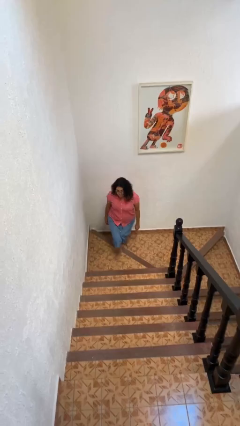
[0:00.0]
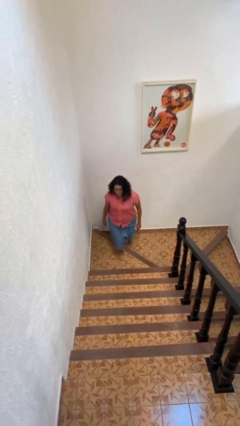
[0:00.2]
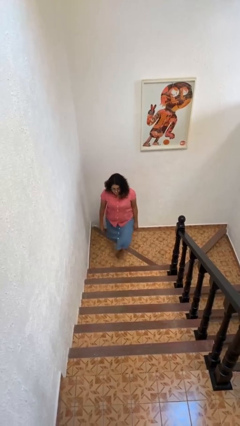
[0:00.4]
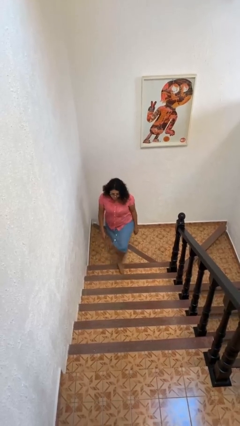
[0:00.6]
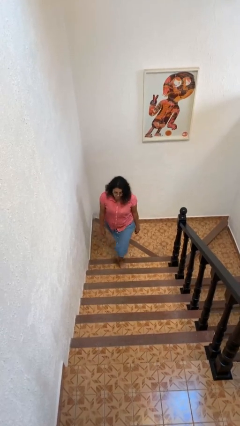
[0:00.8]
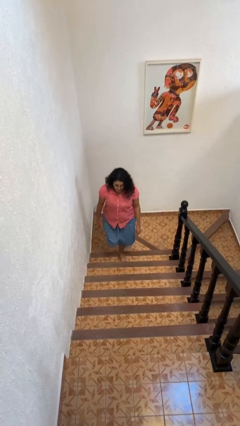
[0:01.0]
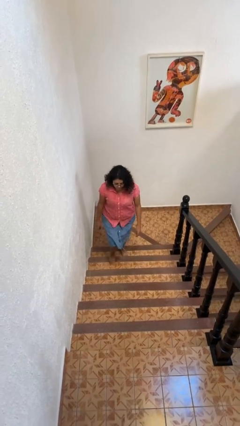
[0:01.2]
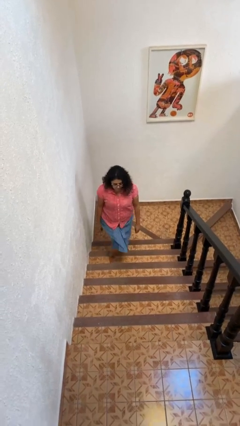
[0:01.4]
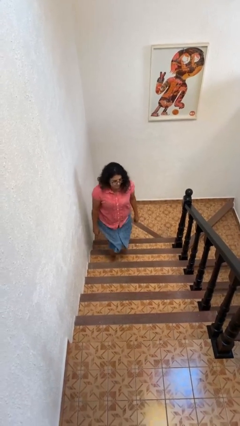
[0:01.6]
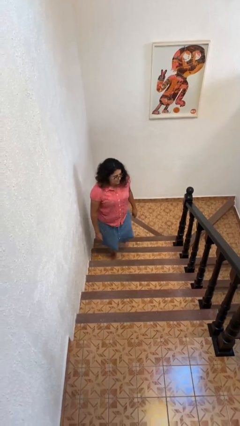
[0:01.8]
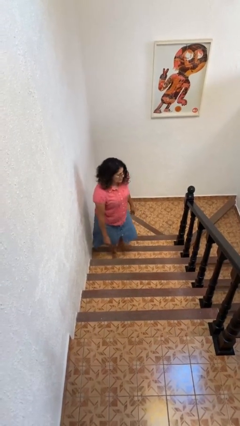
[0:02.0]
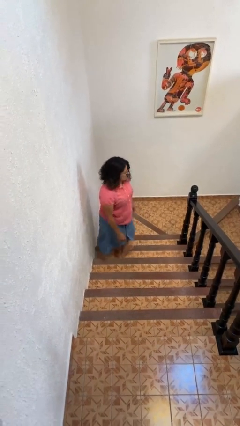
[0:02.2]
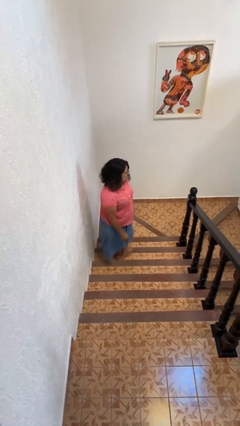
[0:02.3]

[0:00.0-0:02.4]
person climbs up stairs

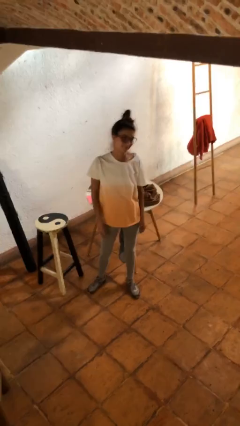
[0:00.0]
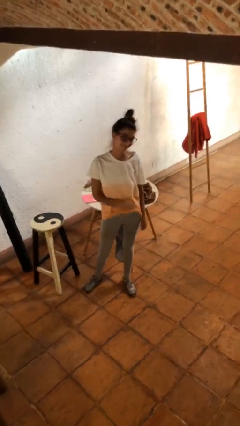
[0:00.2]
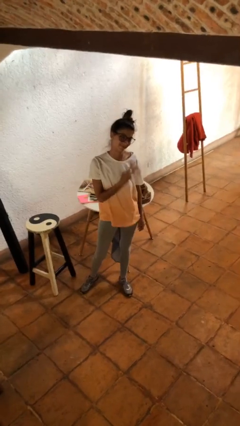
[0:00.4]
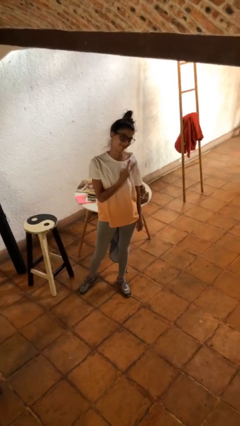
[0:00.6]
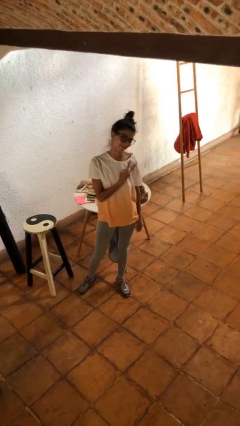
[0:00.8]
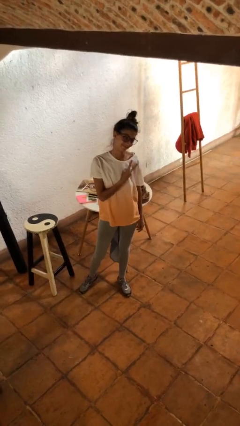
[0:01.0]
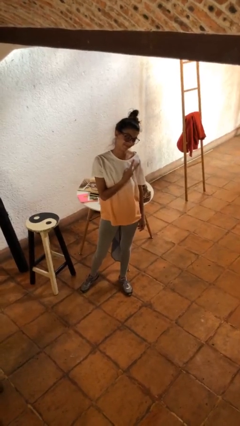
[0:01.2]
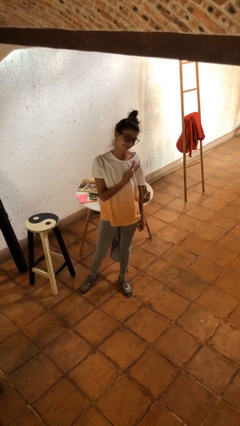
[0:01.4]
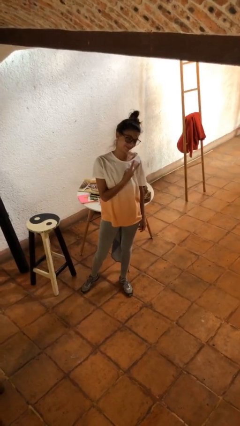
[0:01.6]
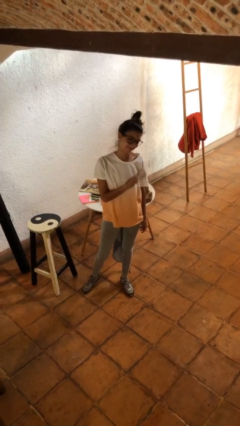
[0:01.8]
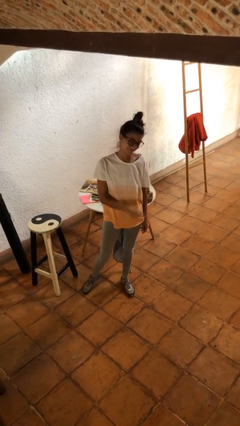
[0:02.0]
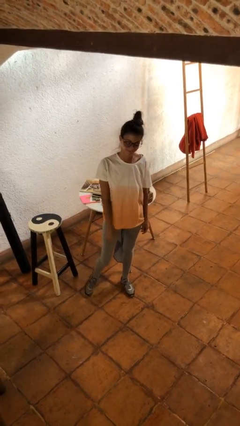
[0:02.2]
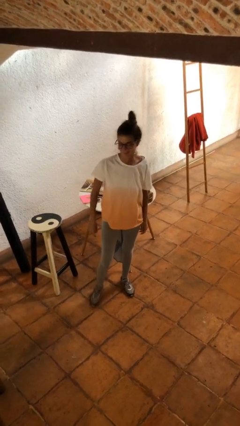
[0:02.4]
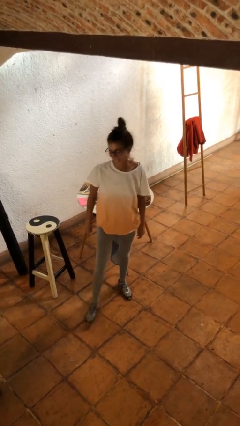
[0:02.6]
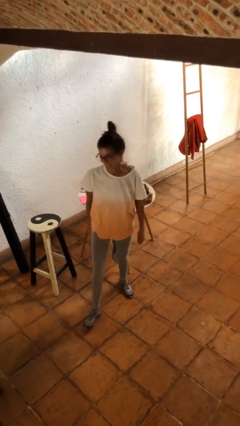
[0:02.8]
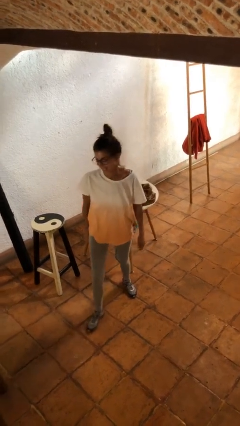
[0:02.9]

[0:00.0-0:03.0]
person gestures peace

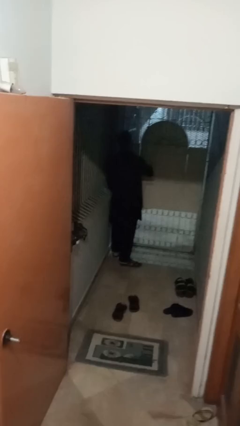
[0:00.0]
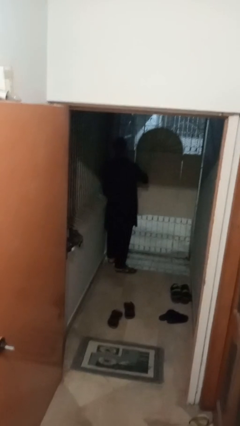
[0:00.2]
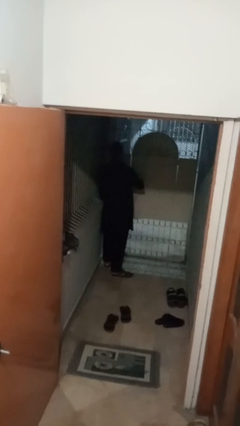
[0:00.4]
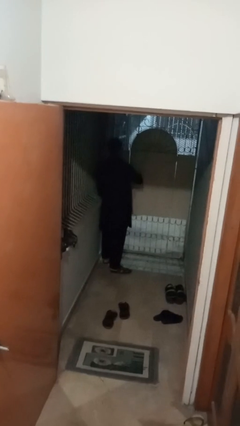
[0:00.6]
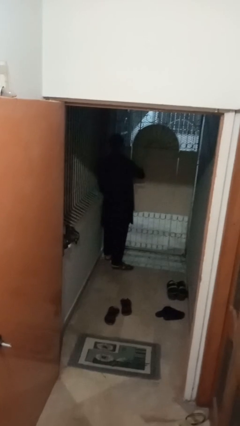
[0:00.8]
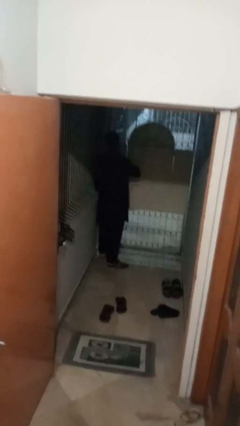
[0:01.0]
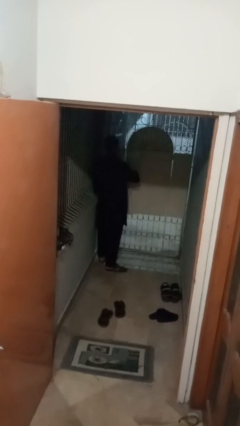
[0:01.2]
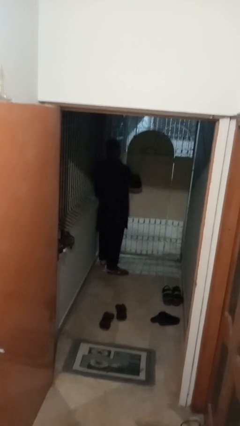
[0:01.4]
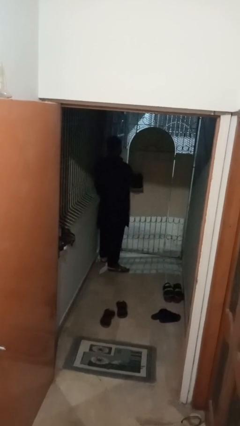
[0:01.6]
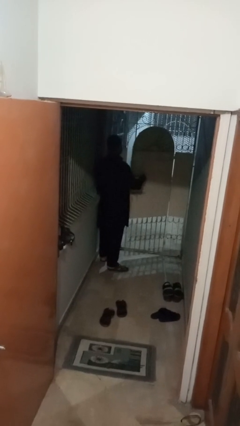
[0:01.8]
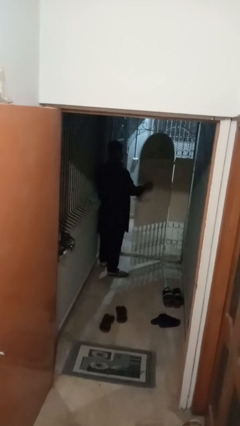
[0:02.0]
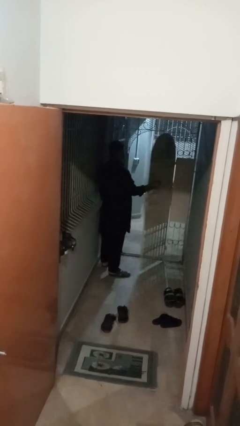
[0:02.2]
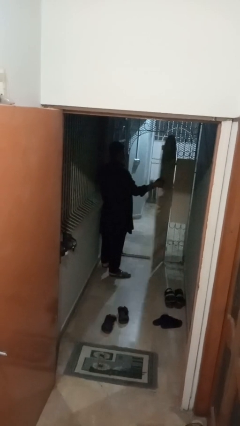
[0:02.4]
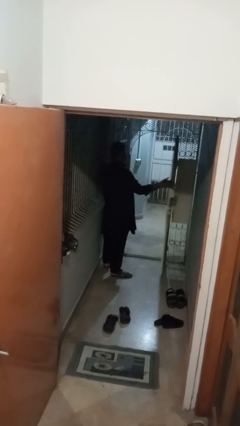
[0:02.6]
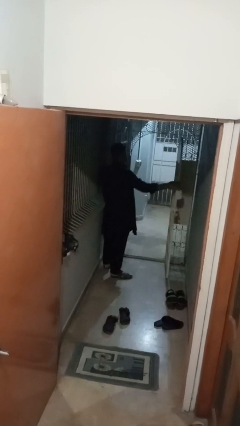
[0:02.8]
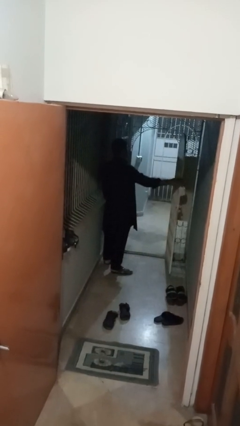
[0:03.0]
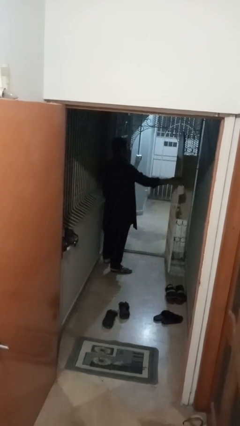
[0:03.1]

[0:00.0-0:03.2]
person opens gate

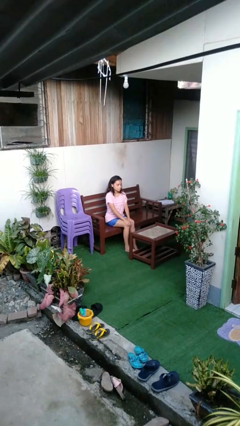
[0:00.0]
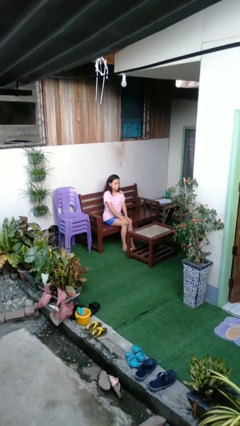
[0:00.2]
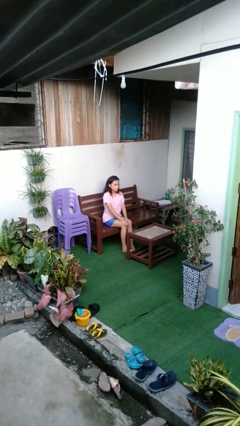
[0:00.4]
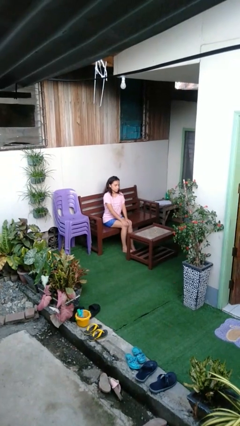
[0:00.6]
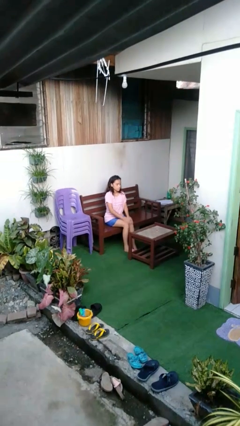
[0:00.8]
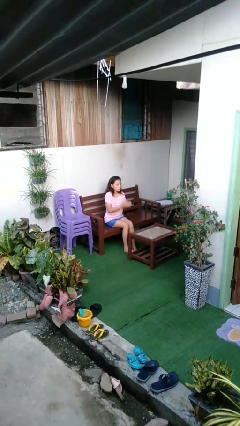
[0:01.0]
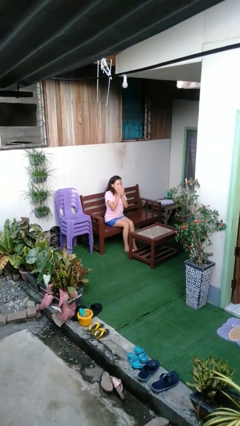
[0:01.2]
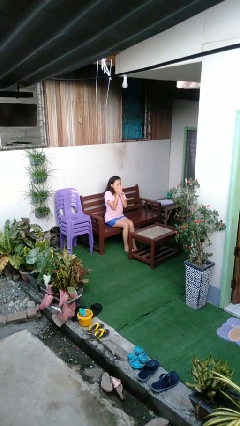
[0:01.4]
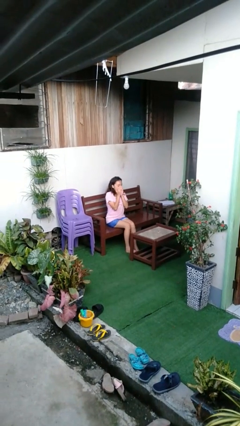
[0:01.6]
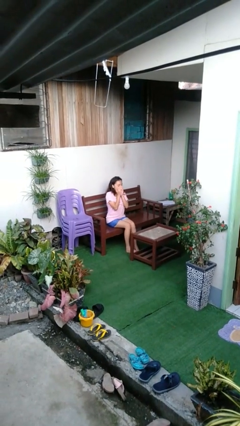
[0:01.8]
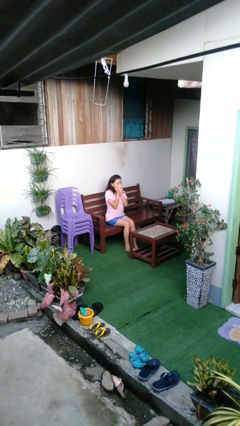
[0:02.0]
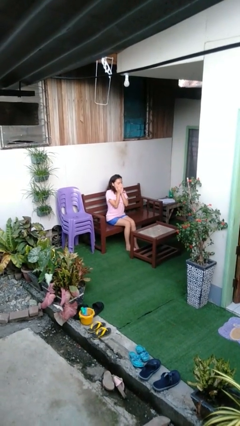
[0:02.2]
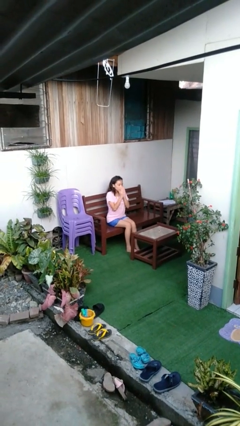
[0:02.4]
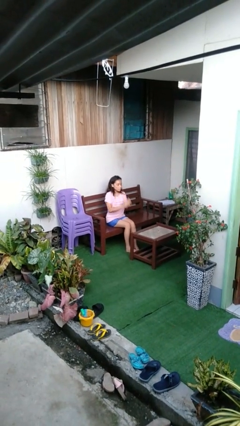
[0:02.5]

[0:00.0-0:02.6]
person yawns

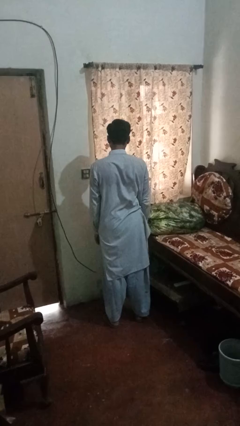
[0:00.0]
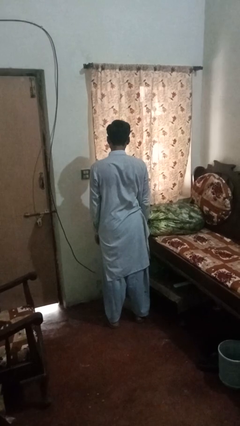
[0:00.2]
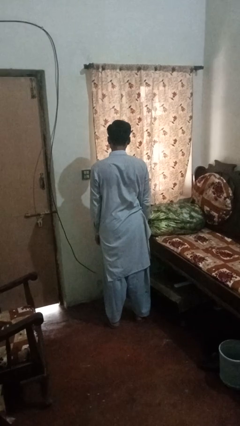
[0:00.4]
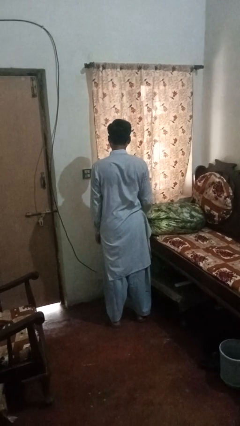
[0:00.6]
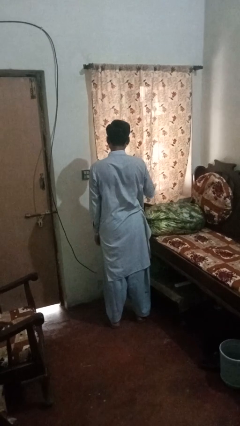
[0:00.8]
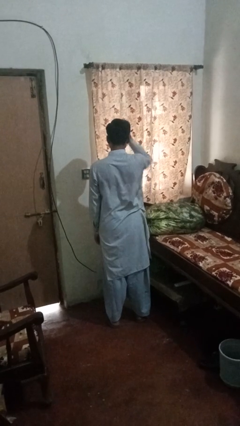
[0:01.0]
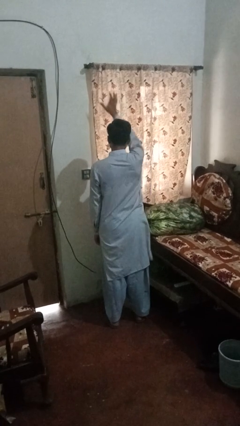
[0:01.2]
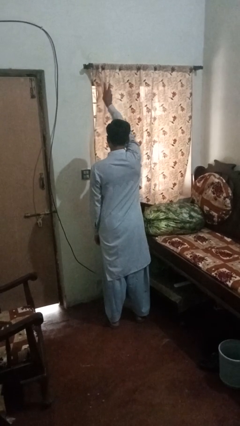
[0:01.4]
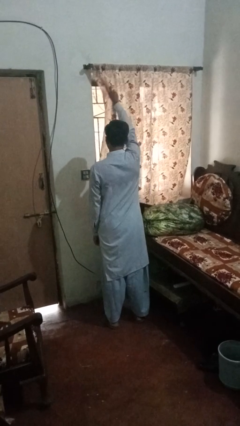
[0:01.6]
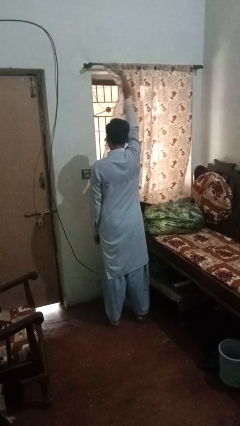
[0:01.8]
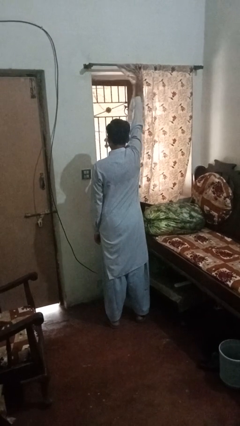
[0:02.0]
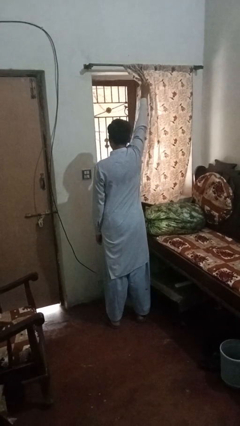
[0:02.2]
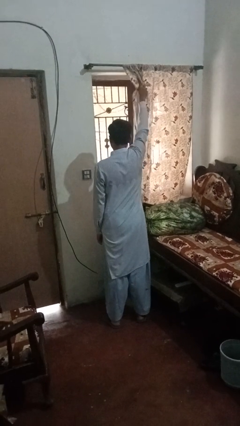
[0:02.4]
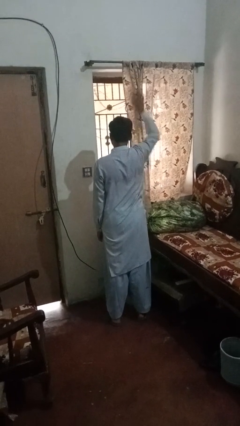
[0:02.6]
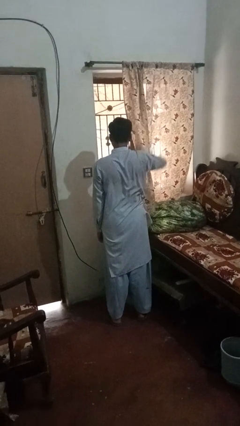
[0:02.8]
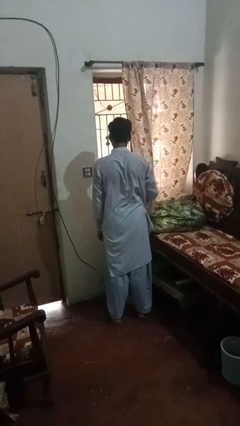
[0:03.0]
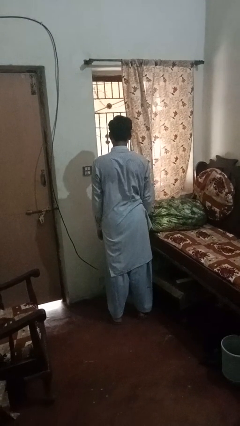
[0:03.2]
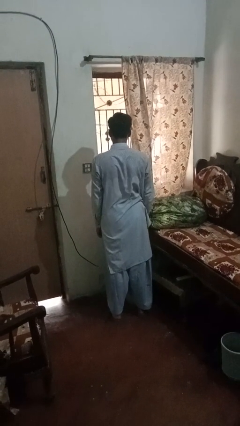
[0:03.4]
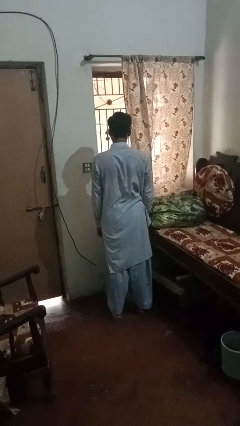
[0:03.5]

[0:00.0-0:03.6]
person opens curtains

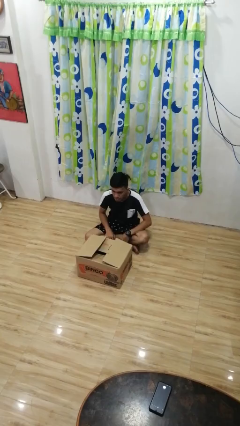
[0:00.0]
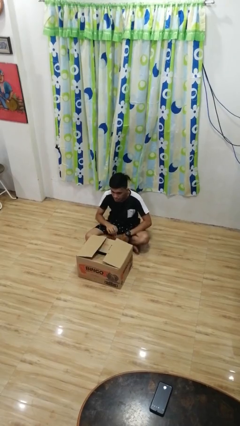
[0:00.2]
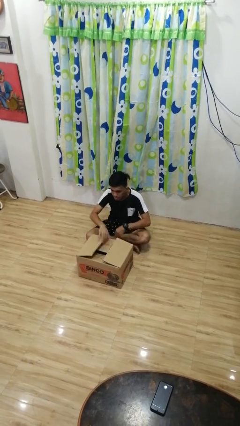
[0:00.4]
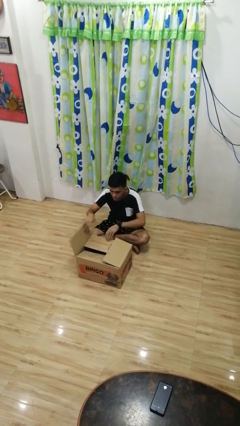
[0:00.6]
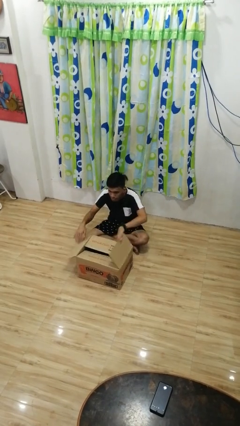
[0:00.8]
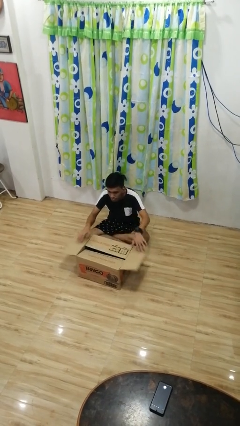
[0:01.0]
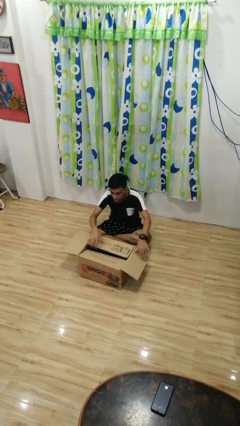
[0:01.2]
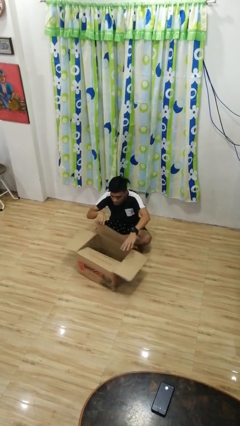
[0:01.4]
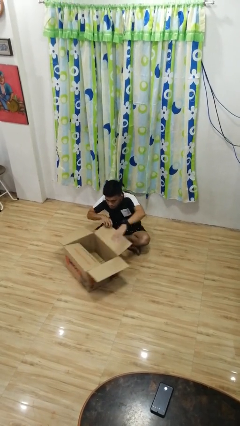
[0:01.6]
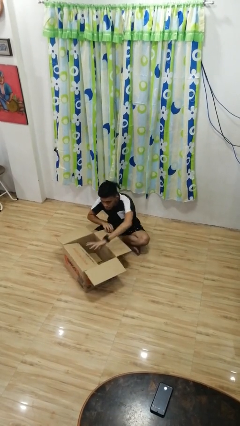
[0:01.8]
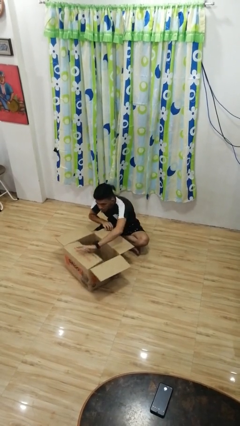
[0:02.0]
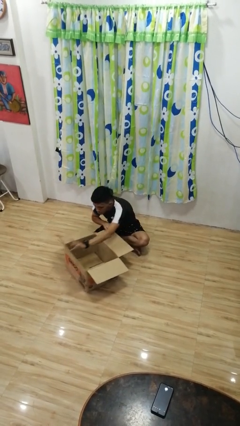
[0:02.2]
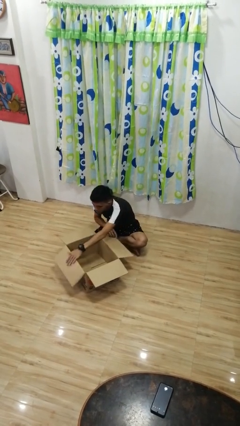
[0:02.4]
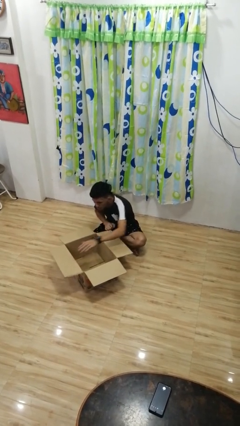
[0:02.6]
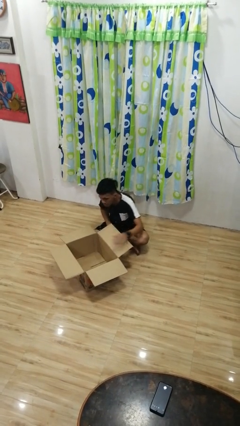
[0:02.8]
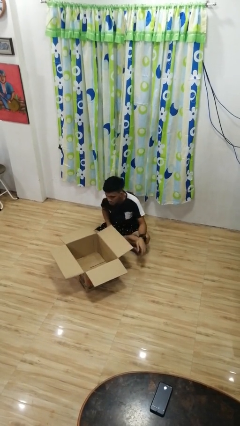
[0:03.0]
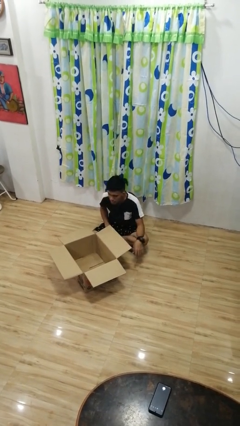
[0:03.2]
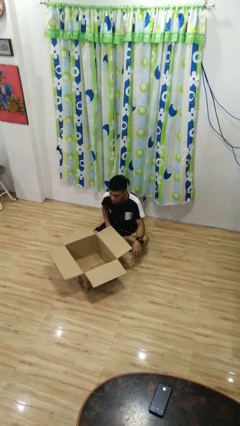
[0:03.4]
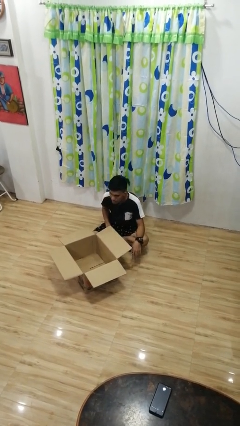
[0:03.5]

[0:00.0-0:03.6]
person opens box
